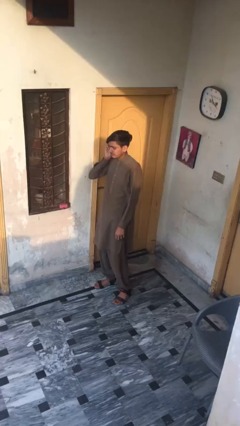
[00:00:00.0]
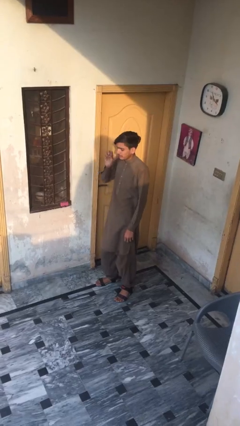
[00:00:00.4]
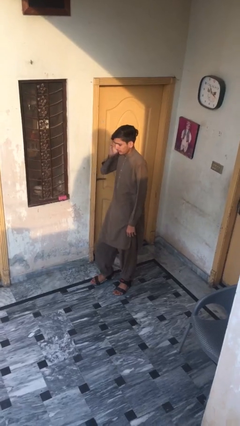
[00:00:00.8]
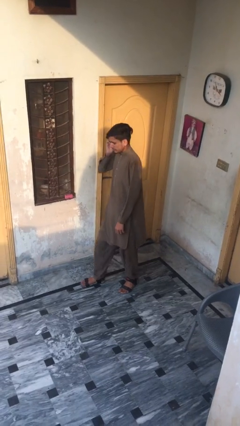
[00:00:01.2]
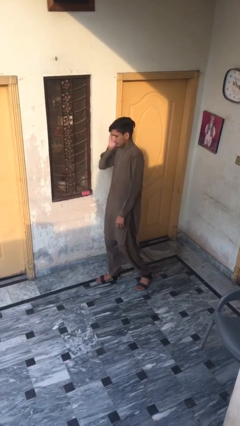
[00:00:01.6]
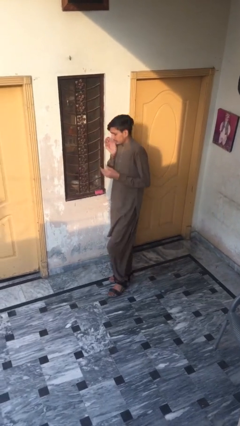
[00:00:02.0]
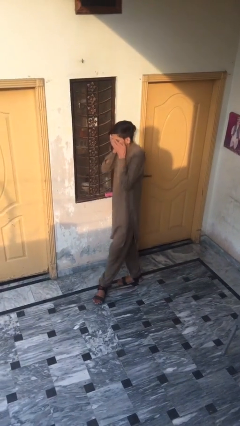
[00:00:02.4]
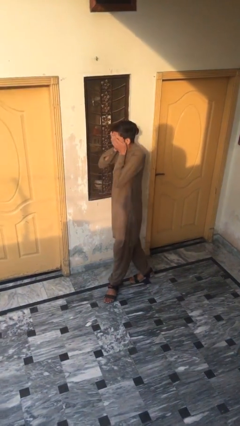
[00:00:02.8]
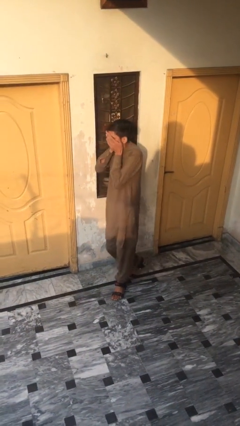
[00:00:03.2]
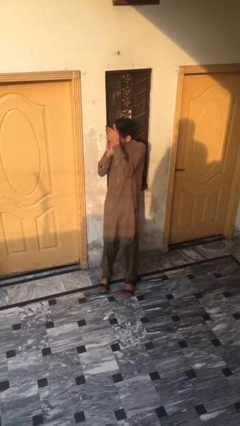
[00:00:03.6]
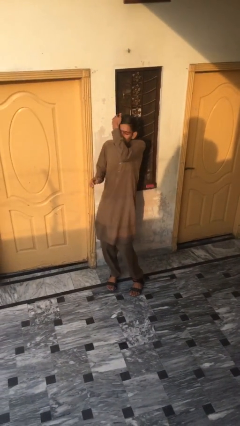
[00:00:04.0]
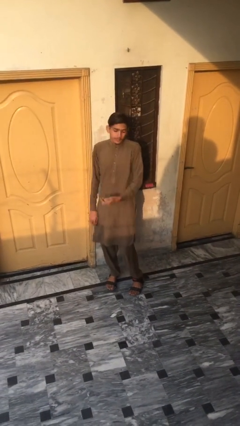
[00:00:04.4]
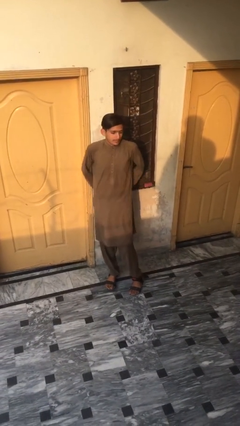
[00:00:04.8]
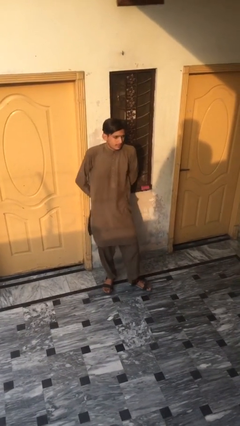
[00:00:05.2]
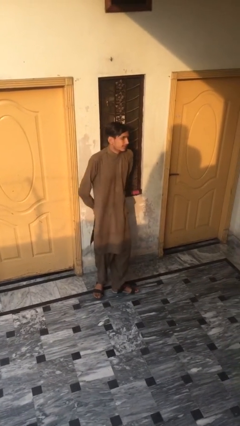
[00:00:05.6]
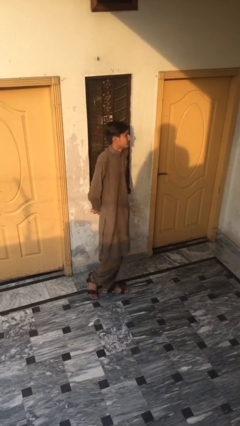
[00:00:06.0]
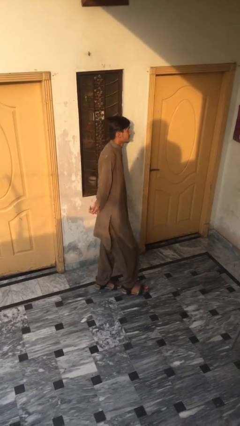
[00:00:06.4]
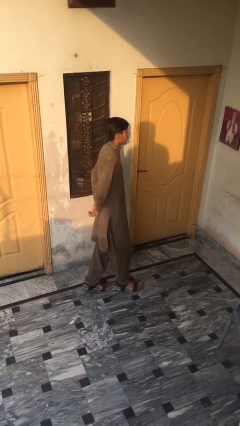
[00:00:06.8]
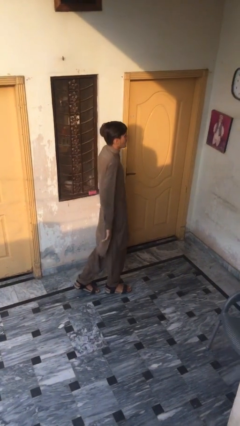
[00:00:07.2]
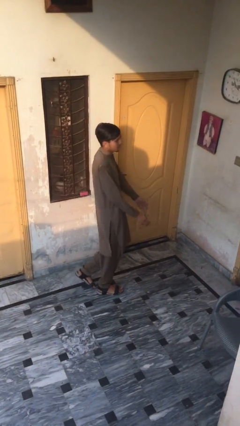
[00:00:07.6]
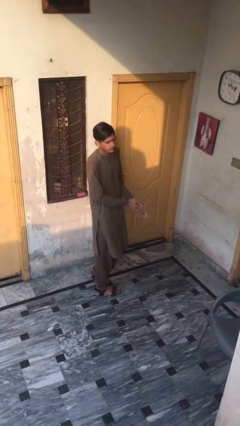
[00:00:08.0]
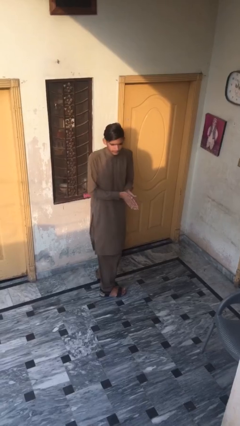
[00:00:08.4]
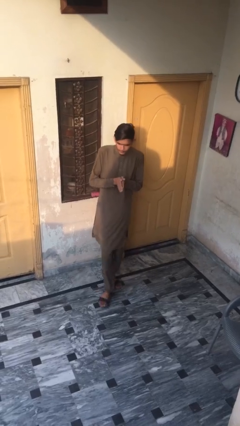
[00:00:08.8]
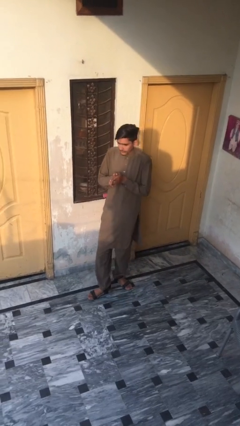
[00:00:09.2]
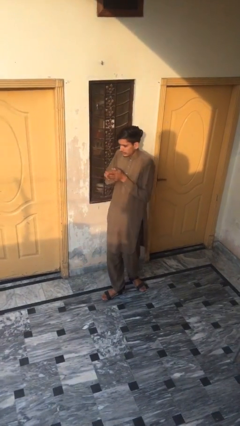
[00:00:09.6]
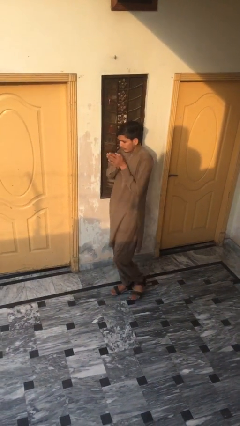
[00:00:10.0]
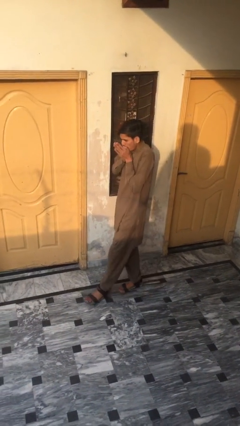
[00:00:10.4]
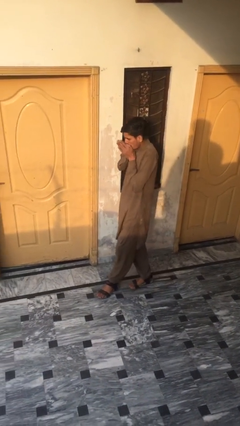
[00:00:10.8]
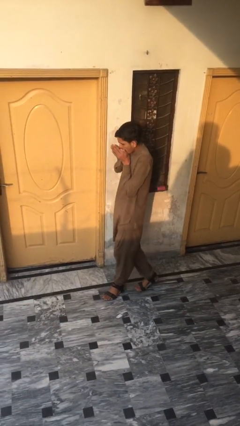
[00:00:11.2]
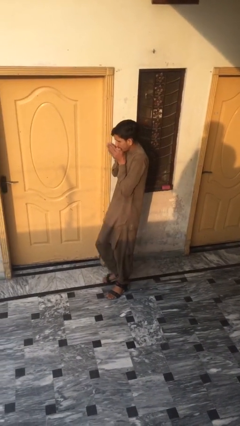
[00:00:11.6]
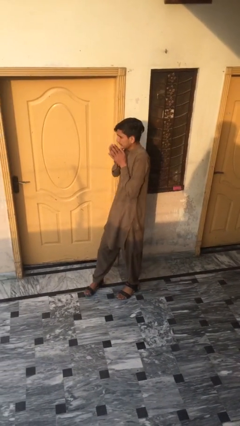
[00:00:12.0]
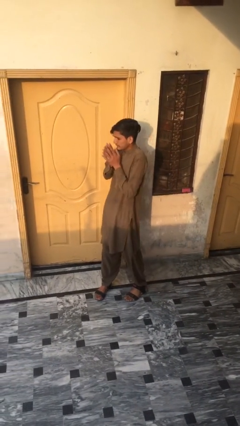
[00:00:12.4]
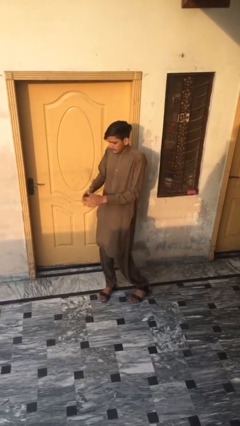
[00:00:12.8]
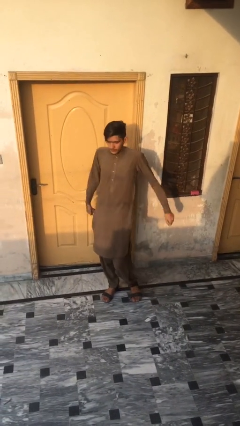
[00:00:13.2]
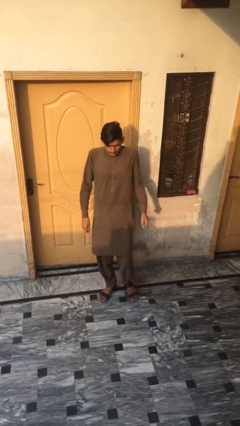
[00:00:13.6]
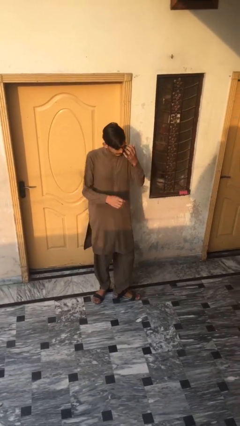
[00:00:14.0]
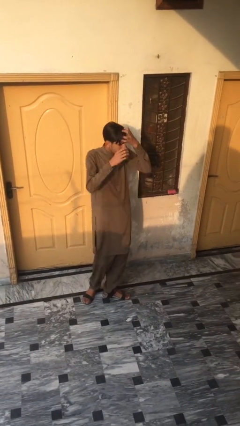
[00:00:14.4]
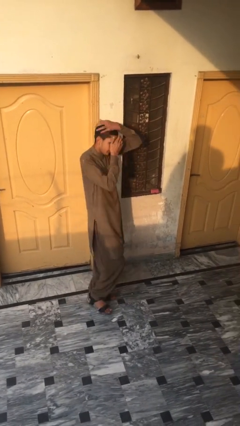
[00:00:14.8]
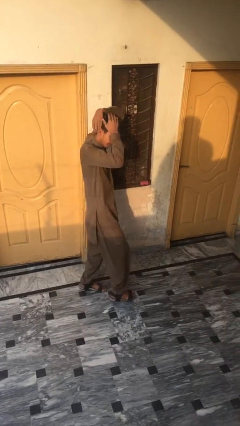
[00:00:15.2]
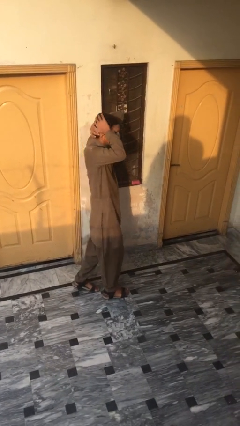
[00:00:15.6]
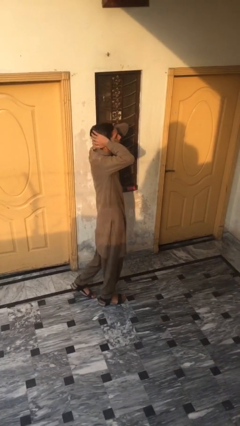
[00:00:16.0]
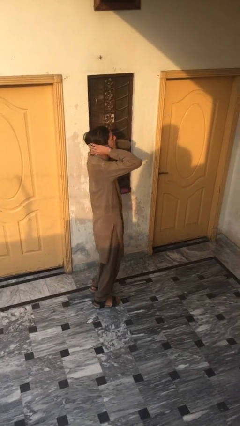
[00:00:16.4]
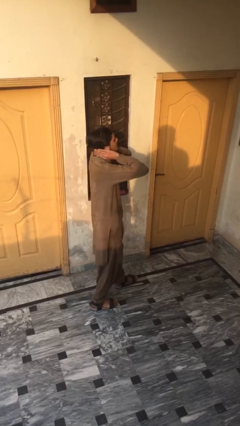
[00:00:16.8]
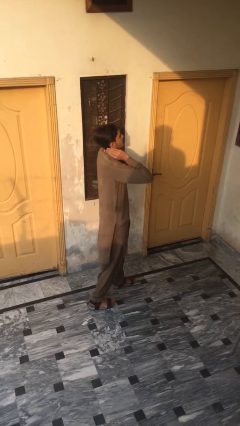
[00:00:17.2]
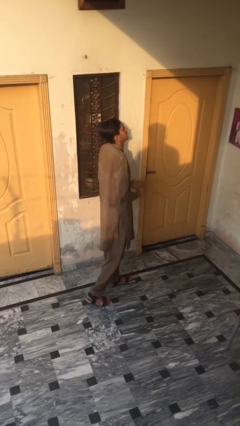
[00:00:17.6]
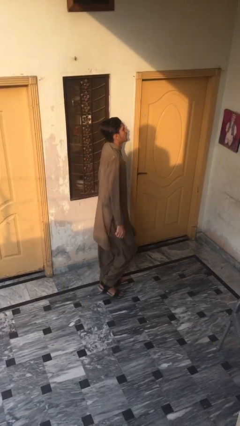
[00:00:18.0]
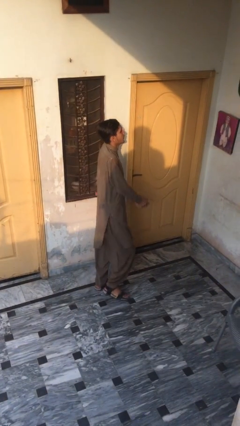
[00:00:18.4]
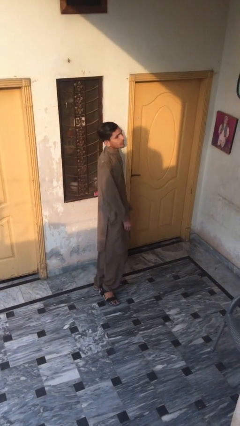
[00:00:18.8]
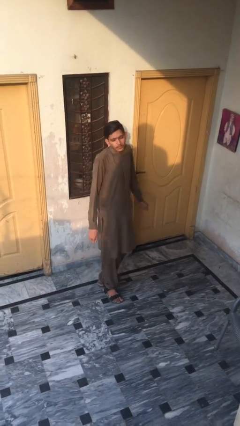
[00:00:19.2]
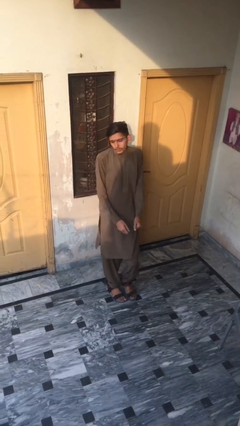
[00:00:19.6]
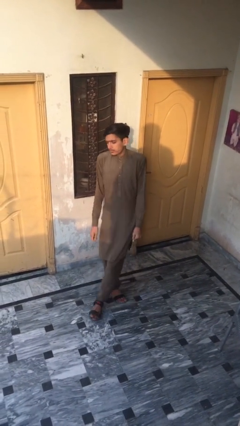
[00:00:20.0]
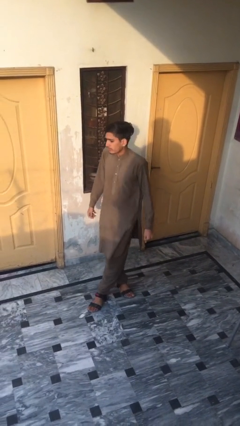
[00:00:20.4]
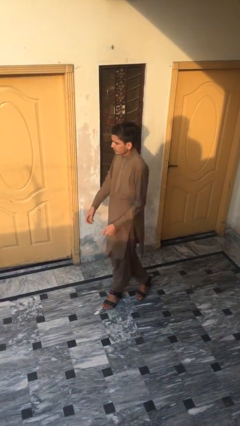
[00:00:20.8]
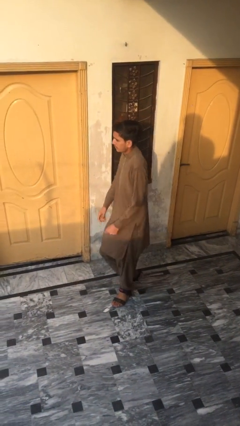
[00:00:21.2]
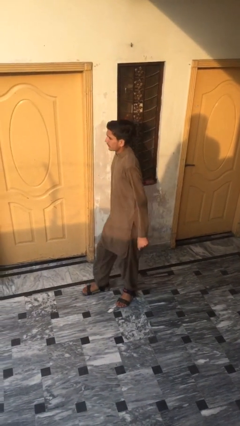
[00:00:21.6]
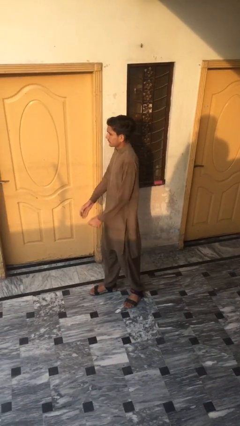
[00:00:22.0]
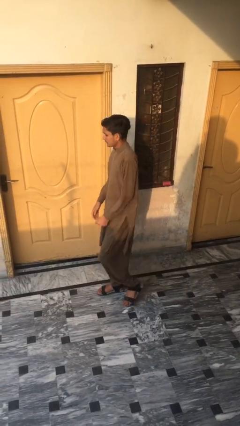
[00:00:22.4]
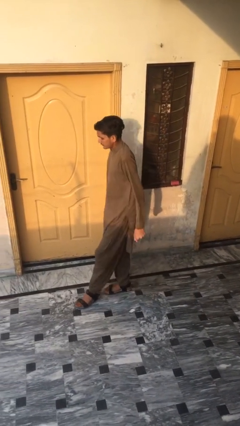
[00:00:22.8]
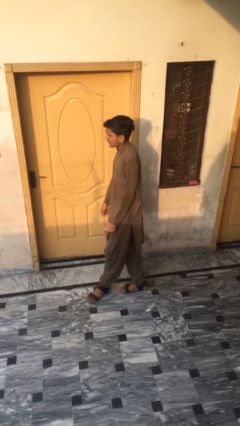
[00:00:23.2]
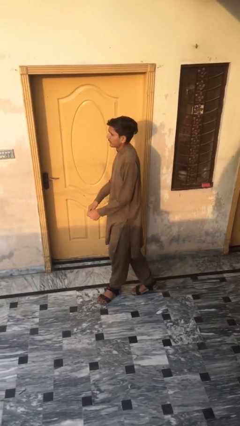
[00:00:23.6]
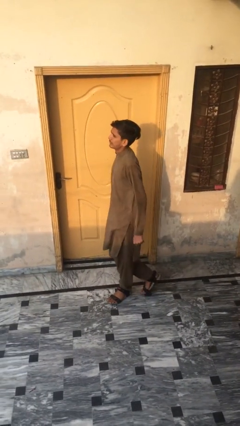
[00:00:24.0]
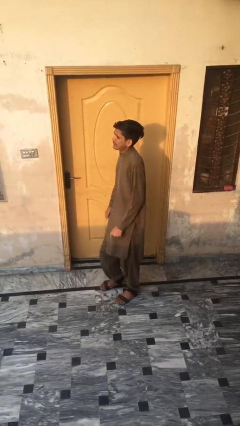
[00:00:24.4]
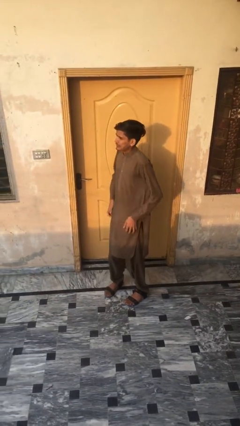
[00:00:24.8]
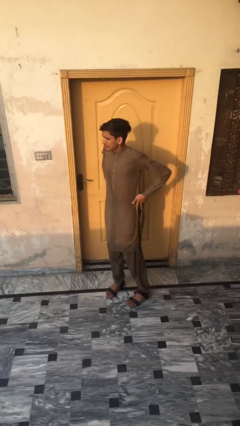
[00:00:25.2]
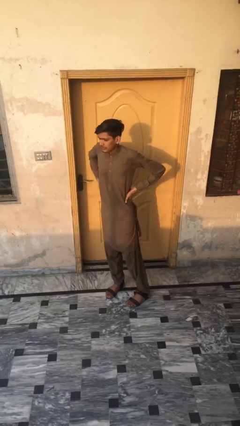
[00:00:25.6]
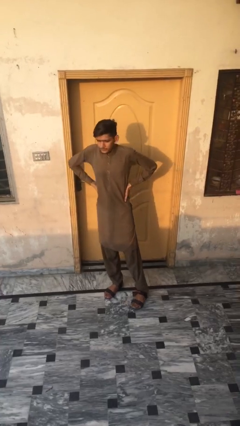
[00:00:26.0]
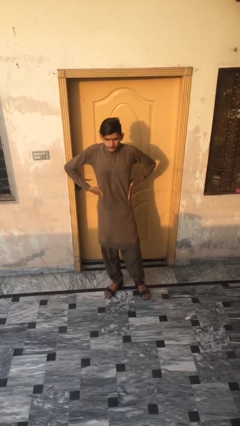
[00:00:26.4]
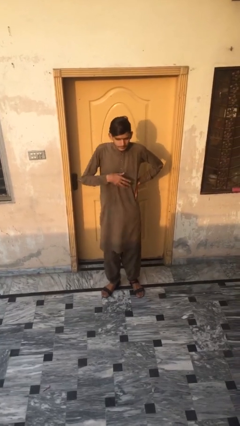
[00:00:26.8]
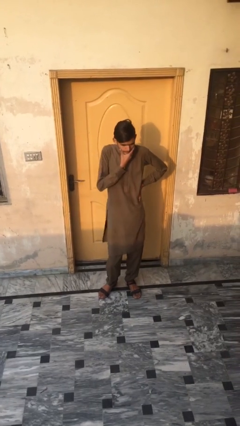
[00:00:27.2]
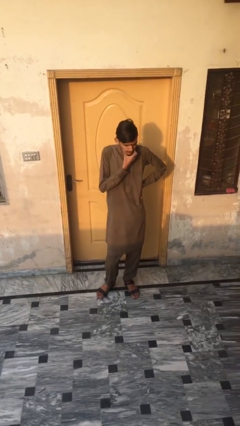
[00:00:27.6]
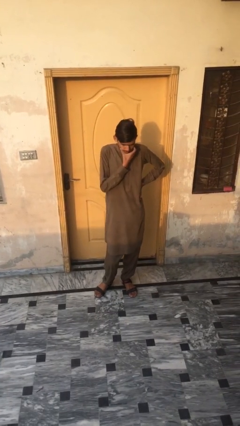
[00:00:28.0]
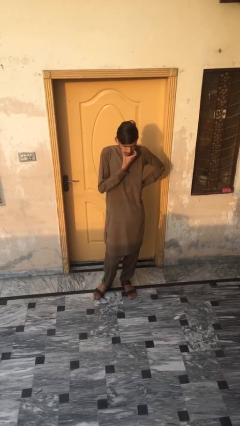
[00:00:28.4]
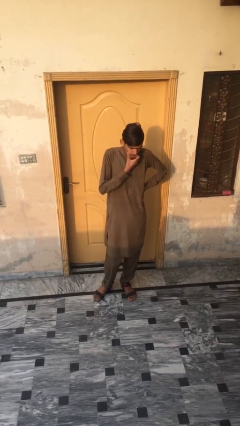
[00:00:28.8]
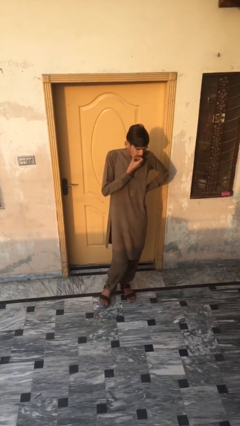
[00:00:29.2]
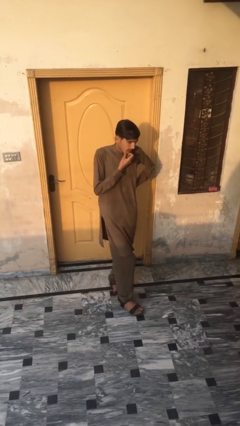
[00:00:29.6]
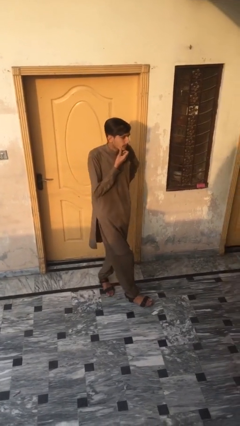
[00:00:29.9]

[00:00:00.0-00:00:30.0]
person walks

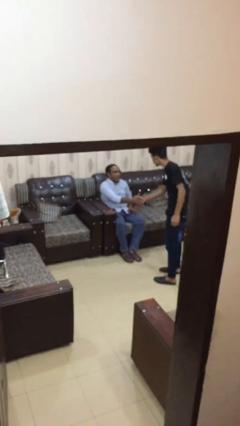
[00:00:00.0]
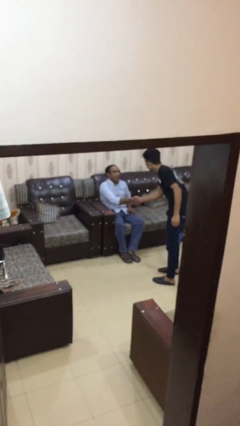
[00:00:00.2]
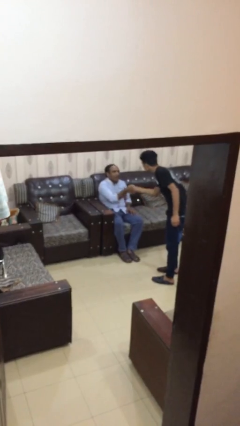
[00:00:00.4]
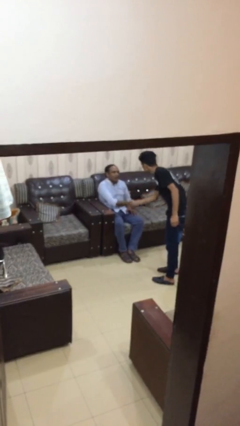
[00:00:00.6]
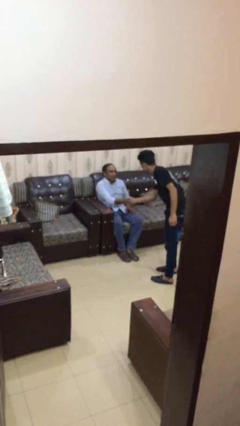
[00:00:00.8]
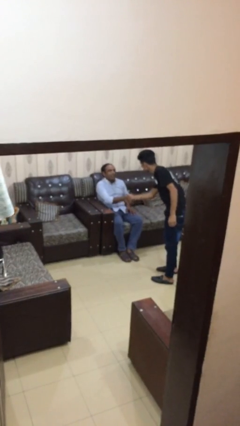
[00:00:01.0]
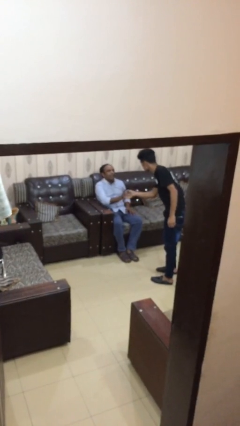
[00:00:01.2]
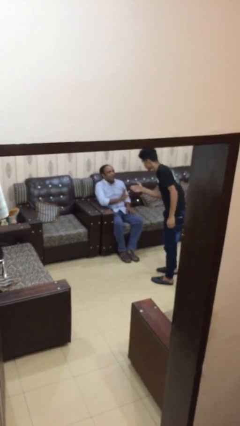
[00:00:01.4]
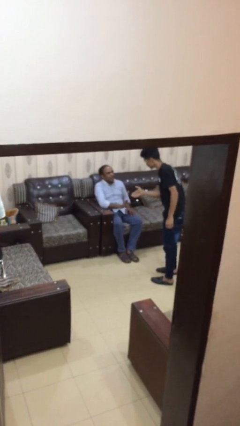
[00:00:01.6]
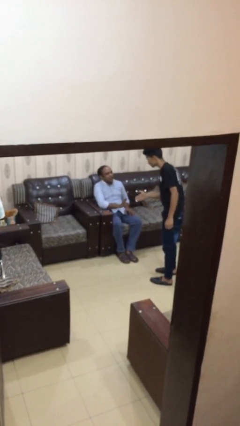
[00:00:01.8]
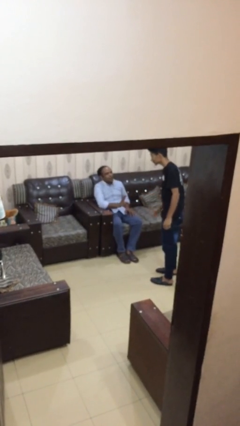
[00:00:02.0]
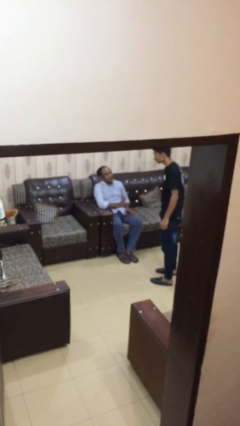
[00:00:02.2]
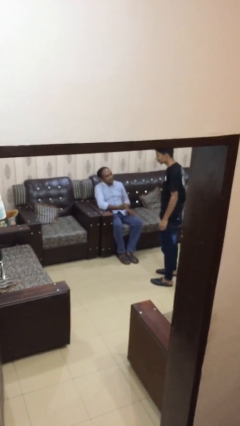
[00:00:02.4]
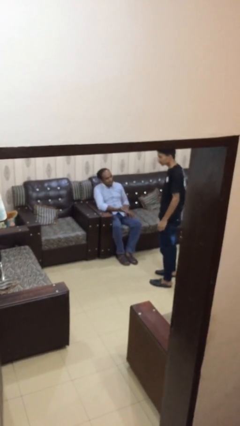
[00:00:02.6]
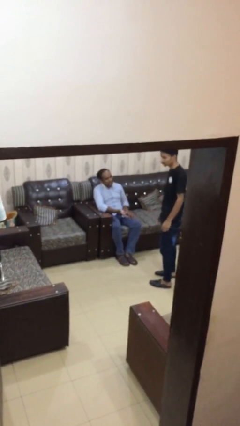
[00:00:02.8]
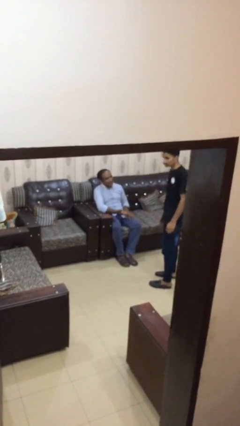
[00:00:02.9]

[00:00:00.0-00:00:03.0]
person shakes hand

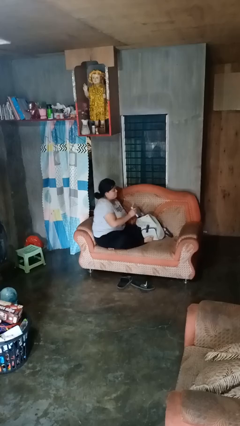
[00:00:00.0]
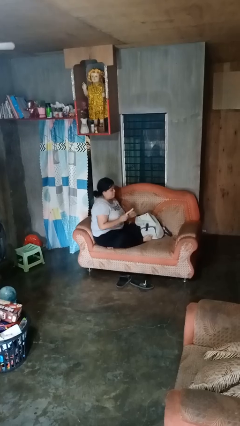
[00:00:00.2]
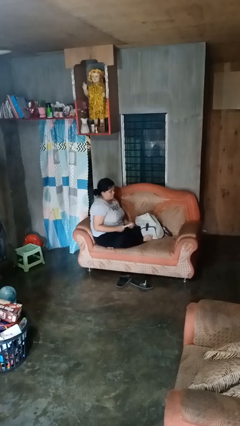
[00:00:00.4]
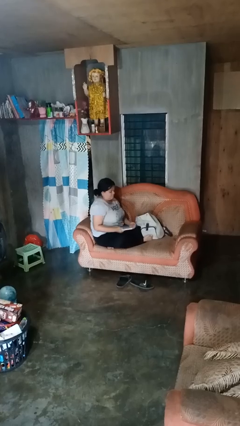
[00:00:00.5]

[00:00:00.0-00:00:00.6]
person takes object from backpack
